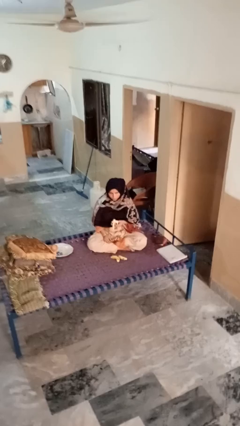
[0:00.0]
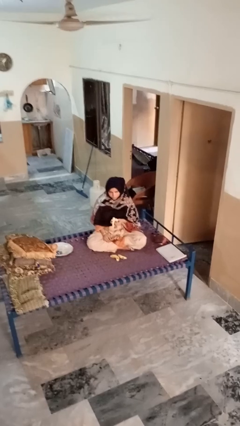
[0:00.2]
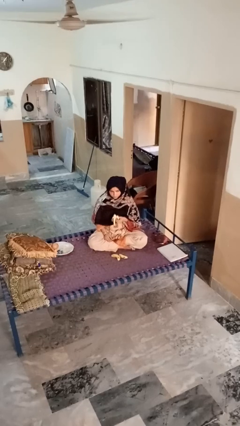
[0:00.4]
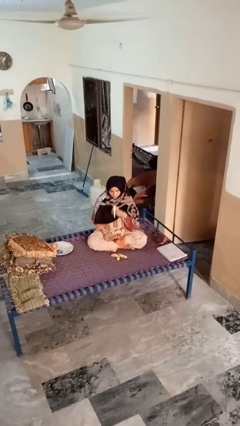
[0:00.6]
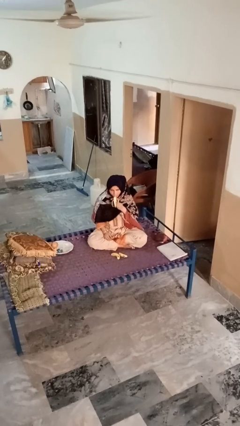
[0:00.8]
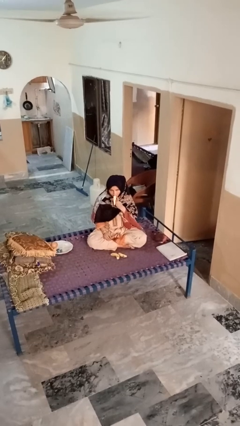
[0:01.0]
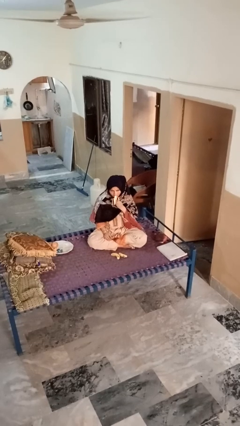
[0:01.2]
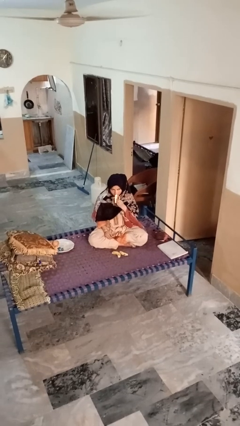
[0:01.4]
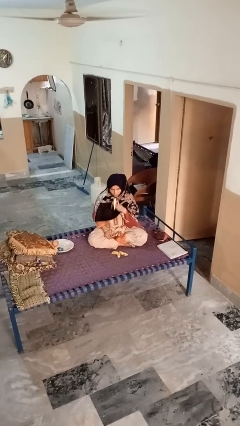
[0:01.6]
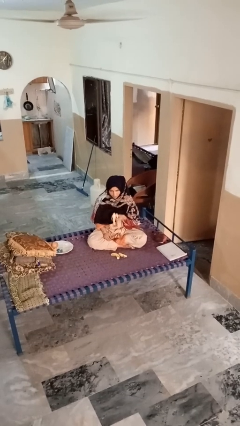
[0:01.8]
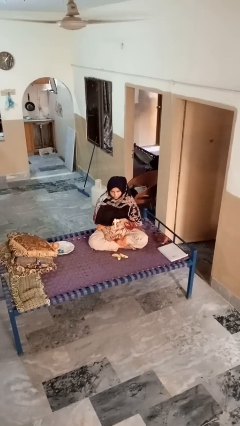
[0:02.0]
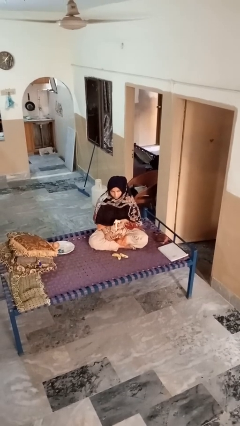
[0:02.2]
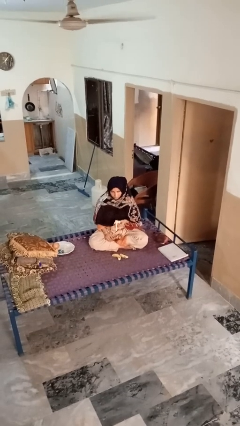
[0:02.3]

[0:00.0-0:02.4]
person eats banana

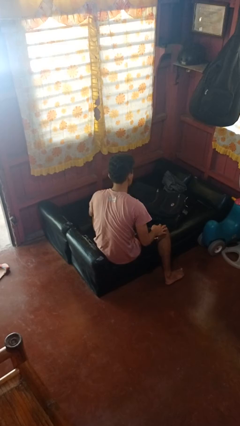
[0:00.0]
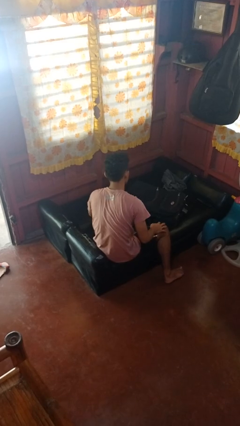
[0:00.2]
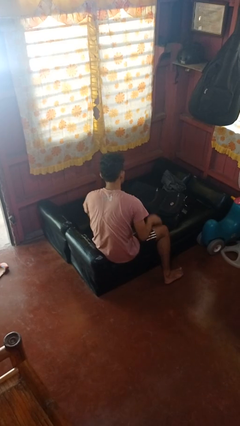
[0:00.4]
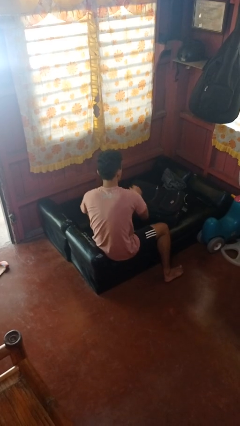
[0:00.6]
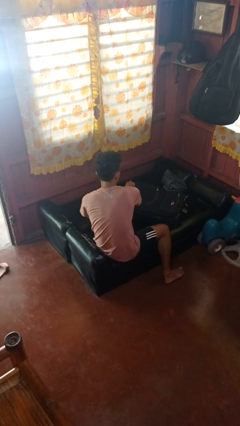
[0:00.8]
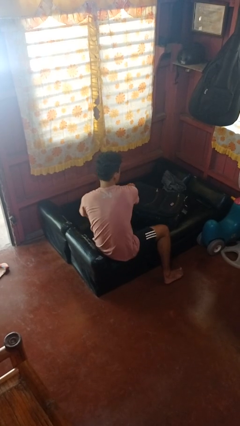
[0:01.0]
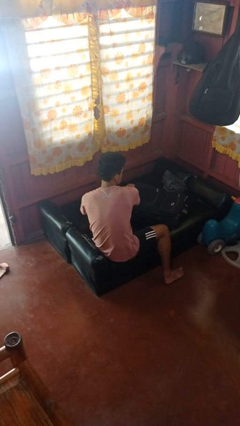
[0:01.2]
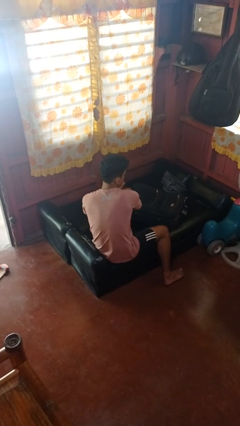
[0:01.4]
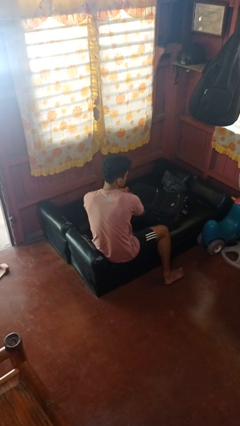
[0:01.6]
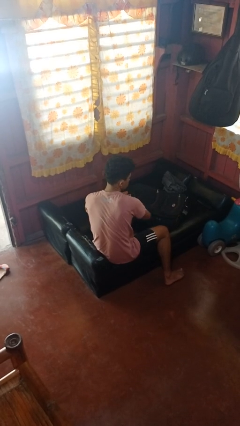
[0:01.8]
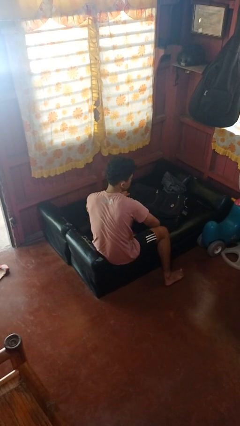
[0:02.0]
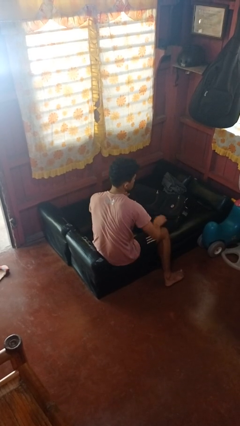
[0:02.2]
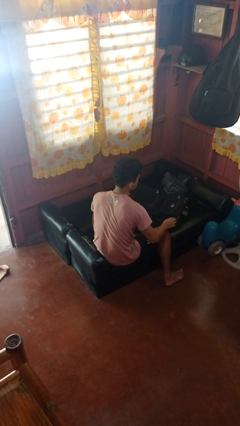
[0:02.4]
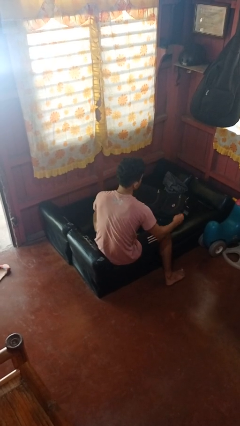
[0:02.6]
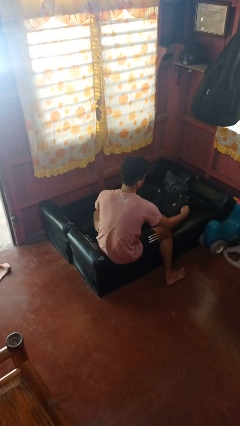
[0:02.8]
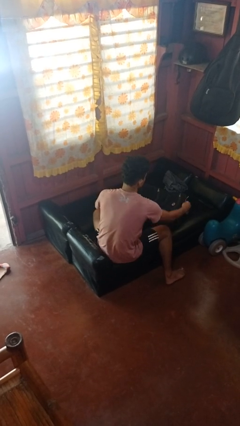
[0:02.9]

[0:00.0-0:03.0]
person closes suitcase

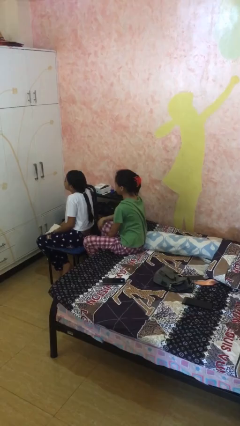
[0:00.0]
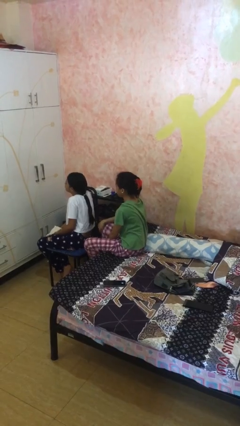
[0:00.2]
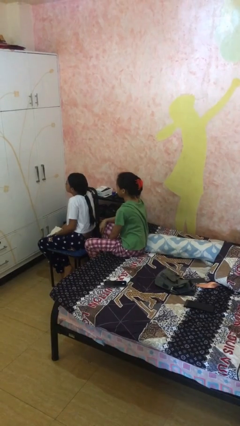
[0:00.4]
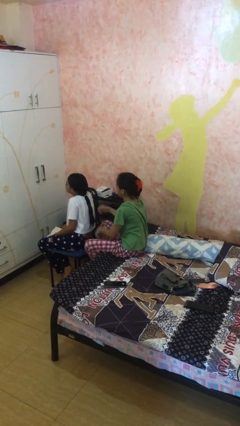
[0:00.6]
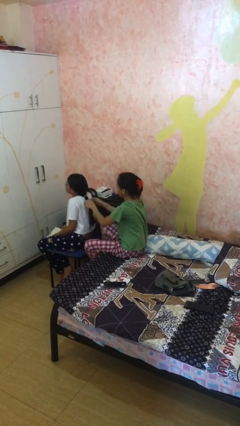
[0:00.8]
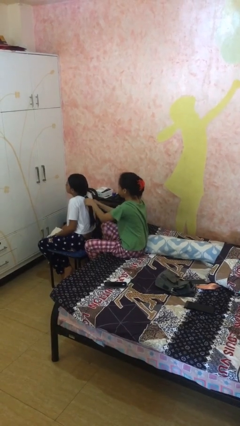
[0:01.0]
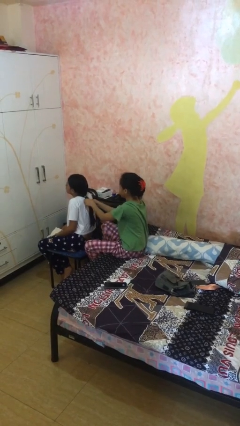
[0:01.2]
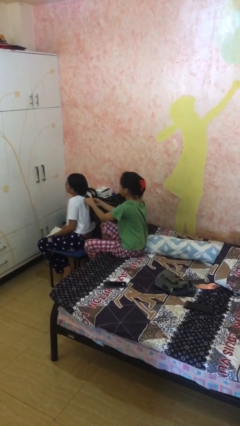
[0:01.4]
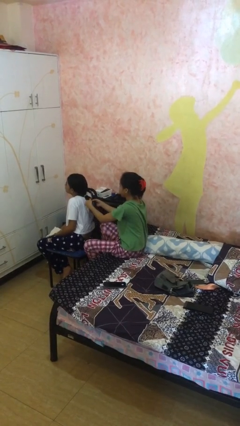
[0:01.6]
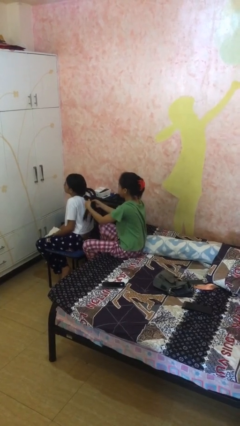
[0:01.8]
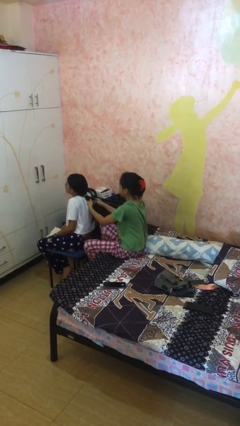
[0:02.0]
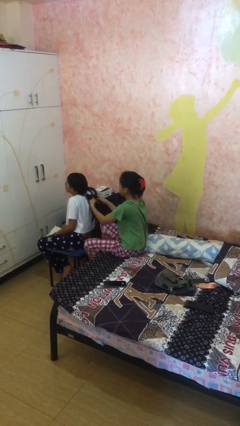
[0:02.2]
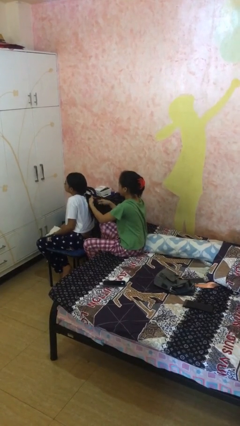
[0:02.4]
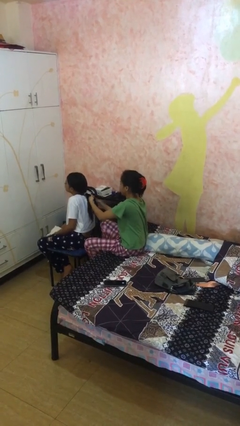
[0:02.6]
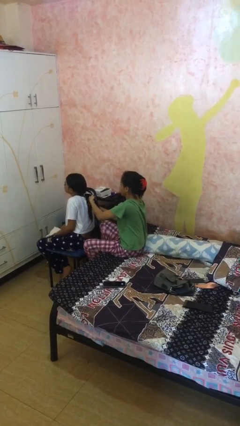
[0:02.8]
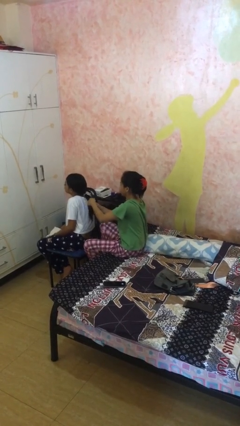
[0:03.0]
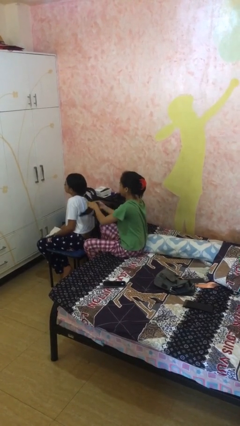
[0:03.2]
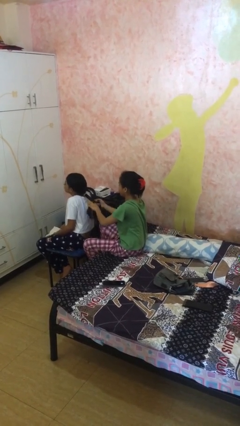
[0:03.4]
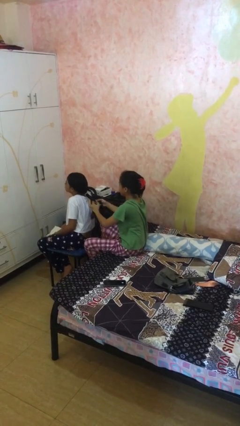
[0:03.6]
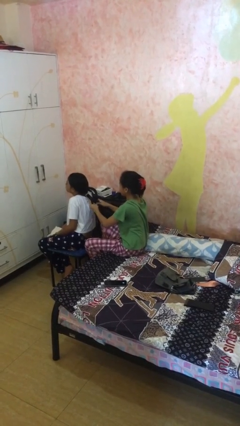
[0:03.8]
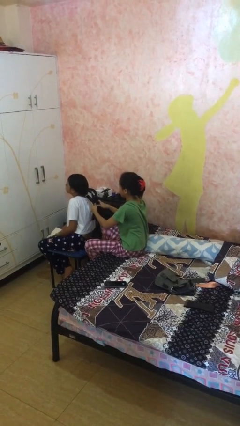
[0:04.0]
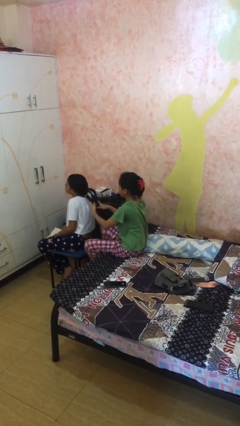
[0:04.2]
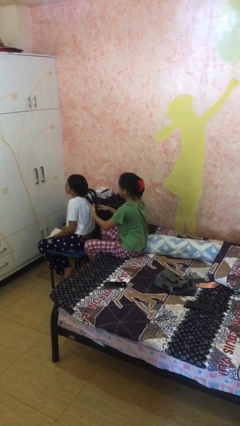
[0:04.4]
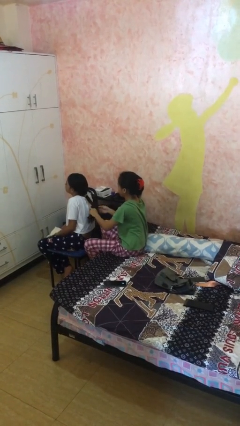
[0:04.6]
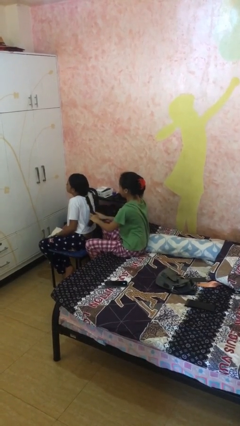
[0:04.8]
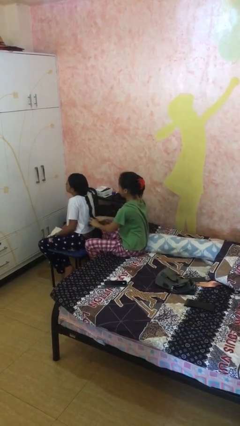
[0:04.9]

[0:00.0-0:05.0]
person braids hair of person

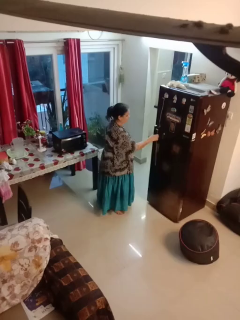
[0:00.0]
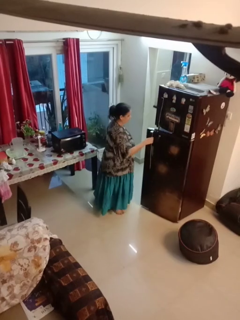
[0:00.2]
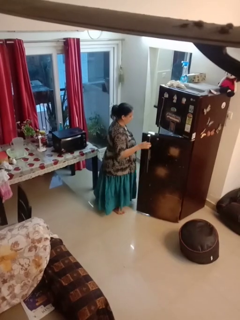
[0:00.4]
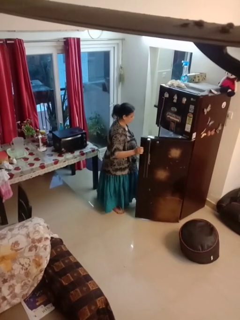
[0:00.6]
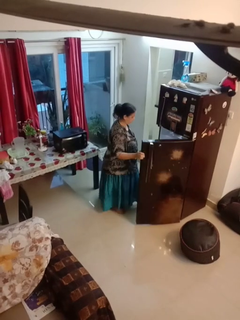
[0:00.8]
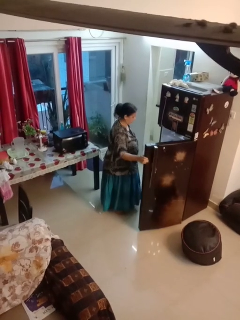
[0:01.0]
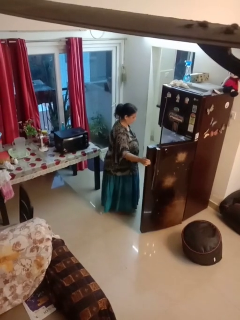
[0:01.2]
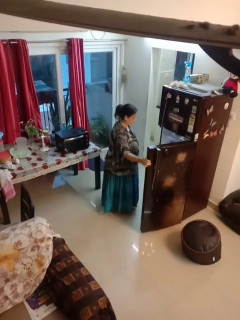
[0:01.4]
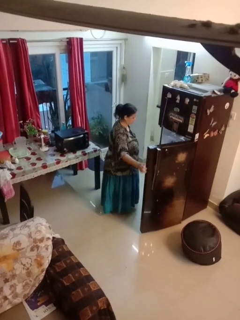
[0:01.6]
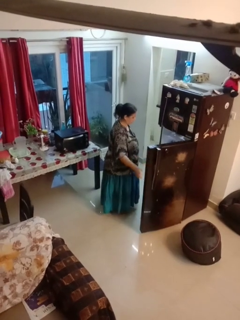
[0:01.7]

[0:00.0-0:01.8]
person opens refrigerator

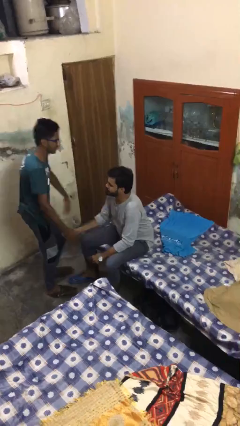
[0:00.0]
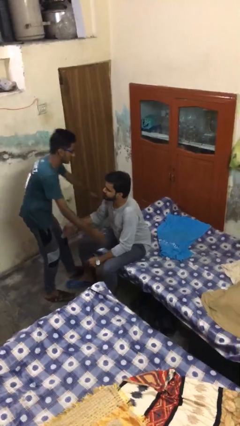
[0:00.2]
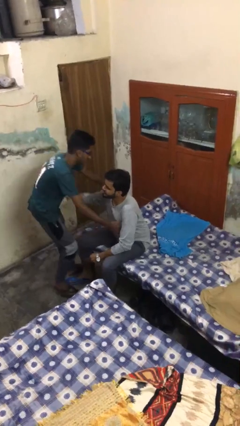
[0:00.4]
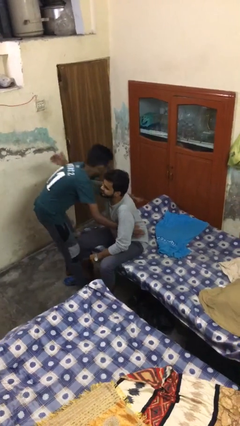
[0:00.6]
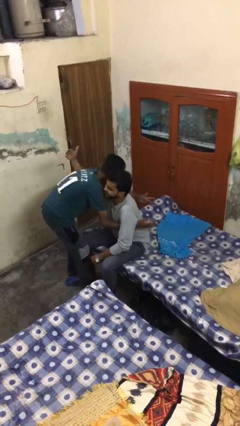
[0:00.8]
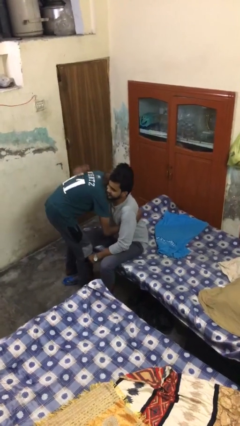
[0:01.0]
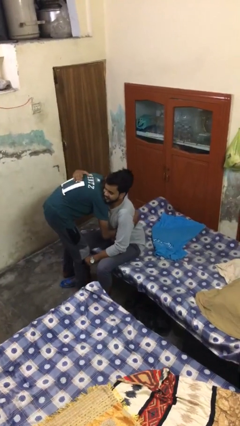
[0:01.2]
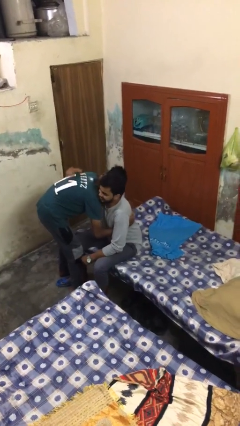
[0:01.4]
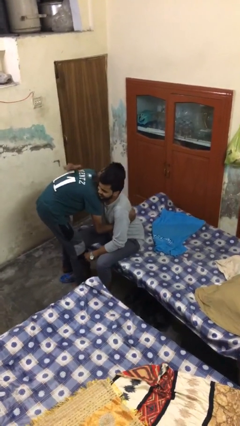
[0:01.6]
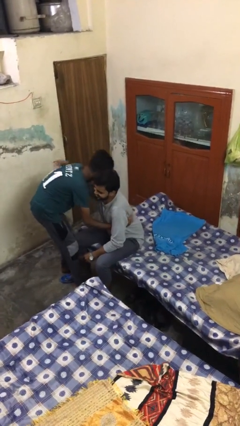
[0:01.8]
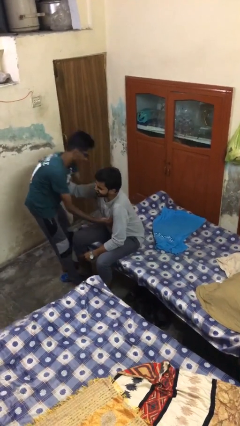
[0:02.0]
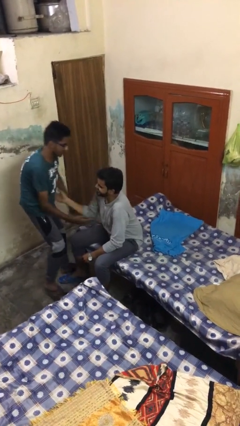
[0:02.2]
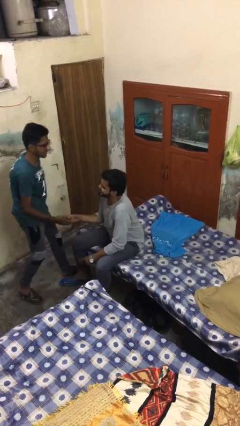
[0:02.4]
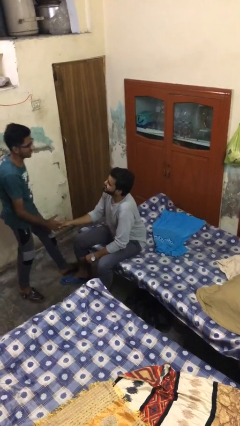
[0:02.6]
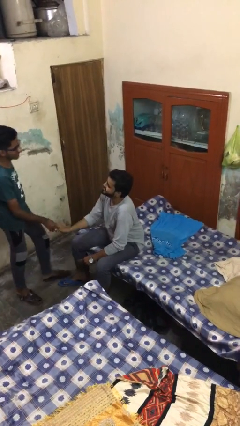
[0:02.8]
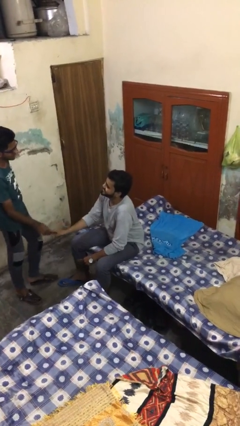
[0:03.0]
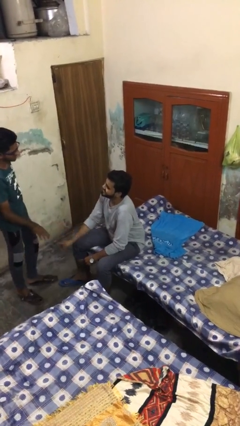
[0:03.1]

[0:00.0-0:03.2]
person embraces person

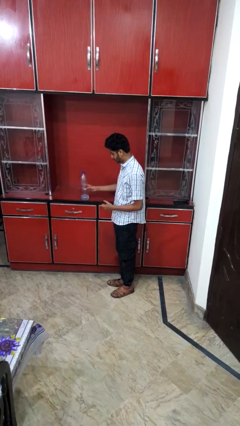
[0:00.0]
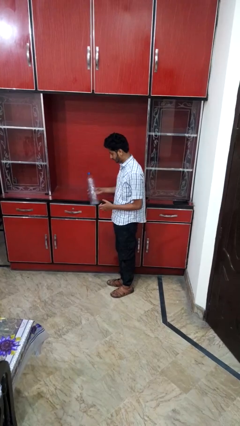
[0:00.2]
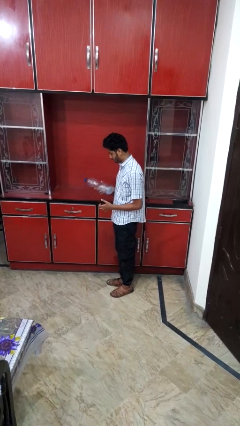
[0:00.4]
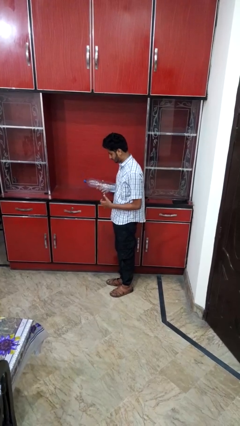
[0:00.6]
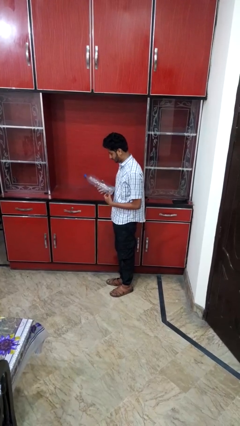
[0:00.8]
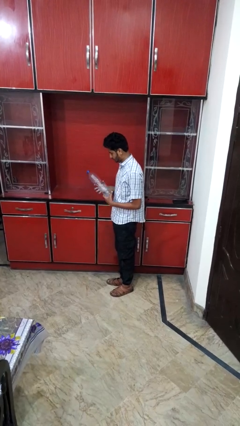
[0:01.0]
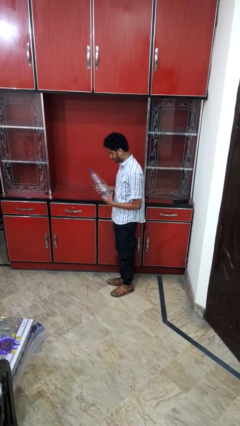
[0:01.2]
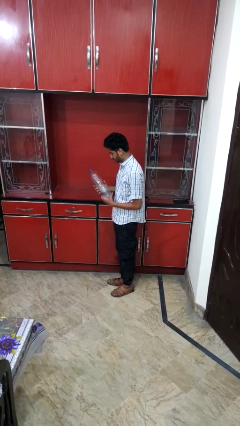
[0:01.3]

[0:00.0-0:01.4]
person picks up object from countertop

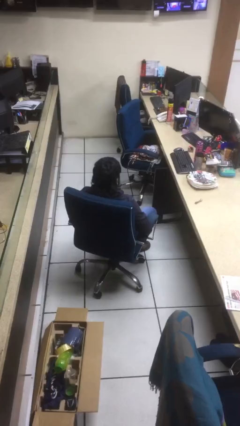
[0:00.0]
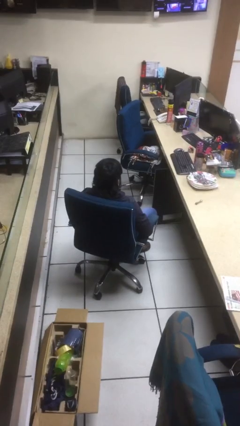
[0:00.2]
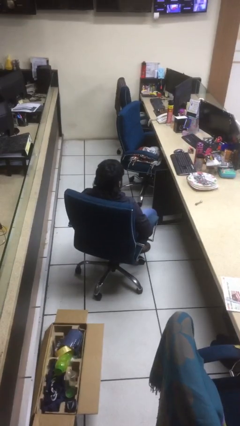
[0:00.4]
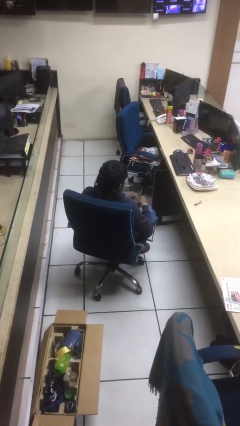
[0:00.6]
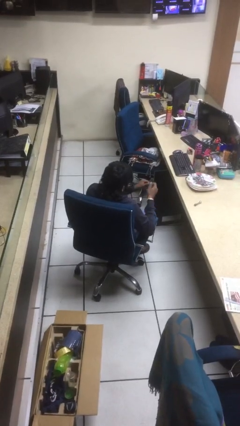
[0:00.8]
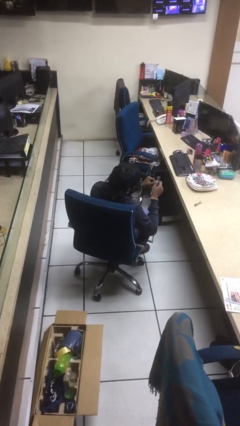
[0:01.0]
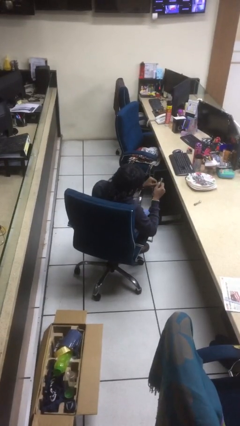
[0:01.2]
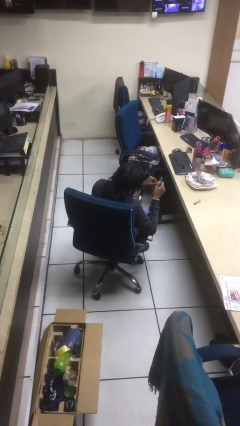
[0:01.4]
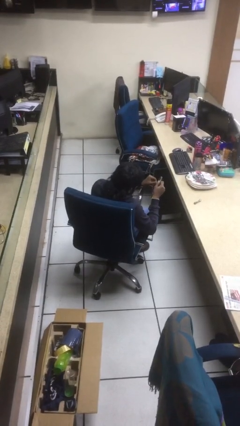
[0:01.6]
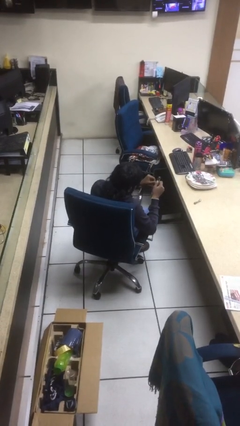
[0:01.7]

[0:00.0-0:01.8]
person files fingernails
